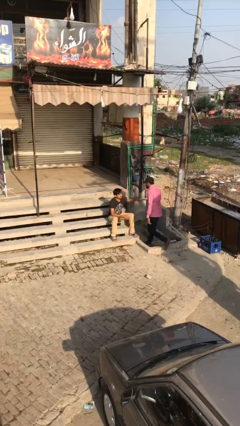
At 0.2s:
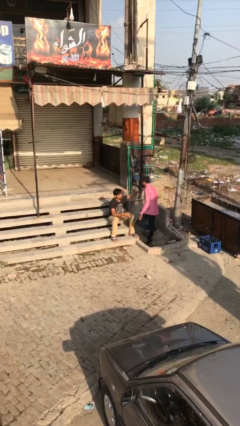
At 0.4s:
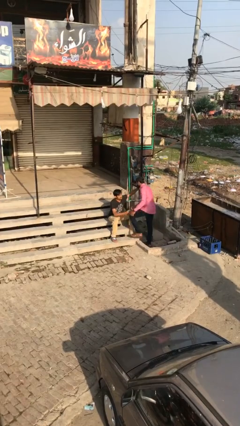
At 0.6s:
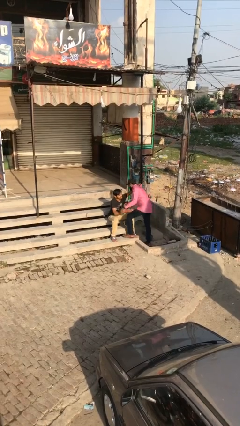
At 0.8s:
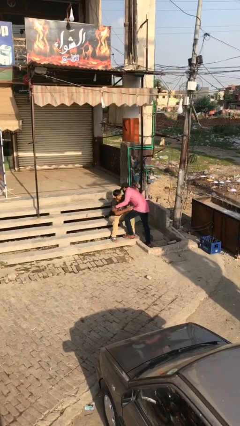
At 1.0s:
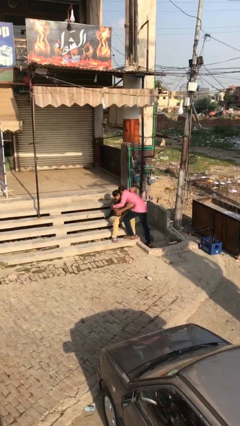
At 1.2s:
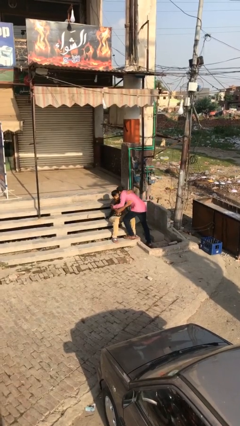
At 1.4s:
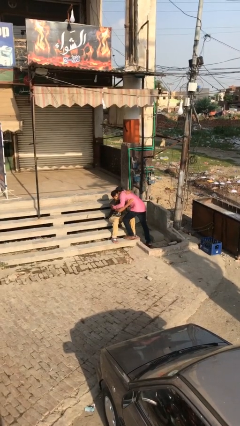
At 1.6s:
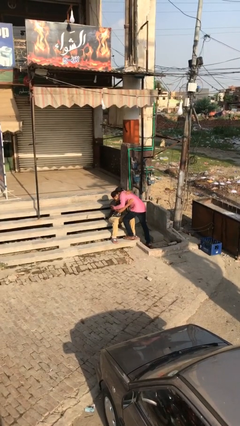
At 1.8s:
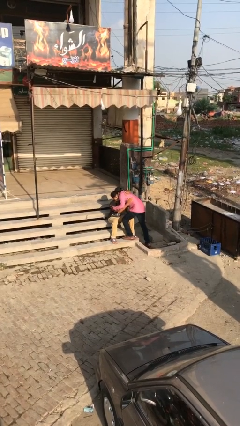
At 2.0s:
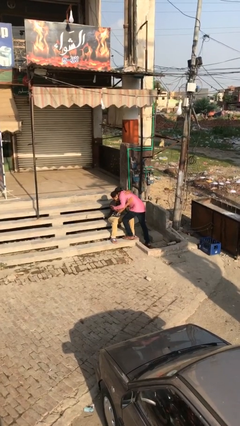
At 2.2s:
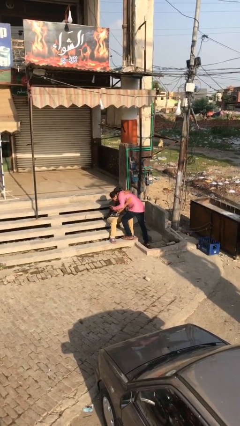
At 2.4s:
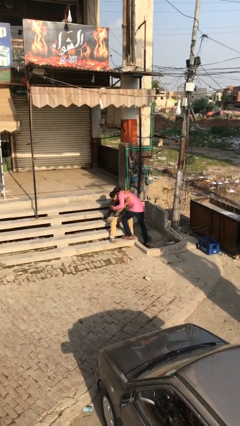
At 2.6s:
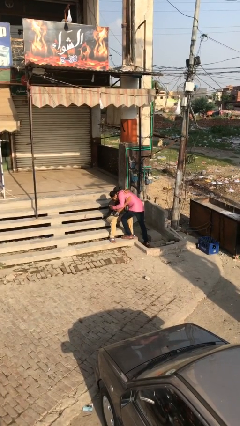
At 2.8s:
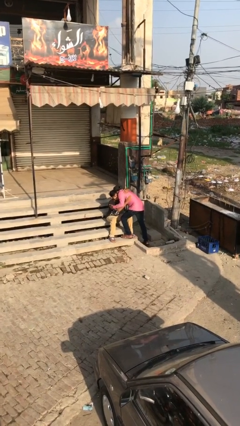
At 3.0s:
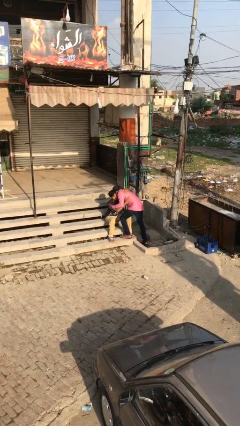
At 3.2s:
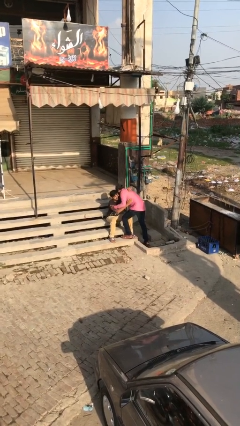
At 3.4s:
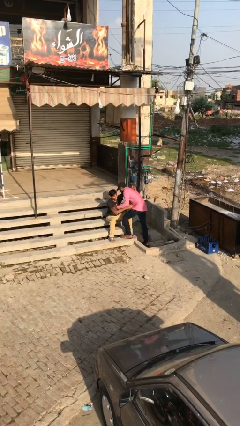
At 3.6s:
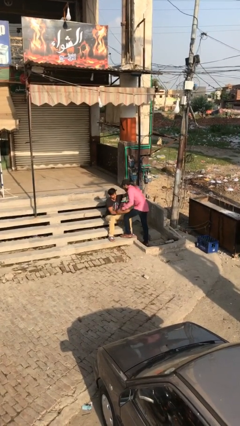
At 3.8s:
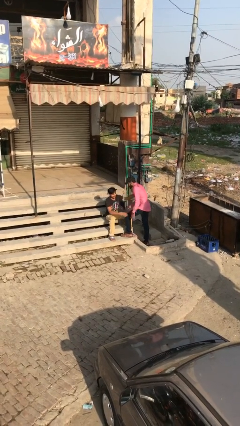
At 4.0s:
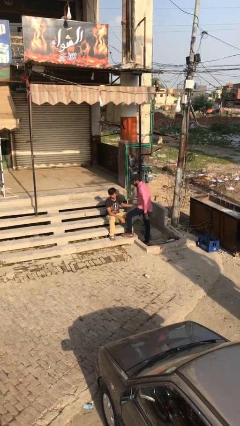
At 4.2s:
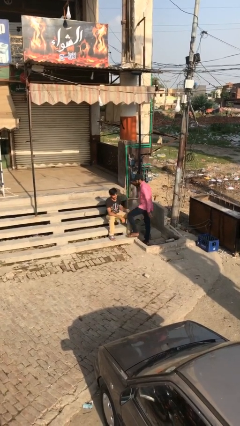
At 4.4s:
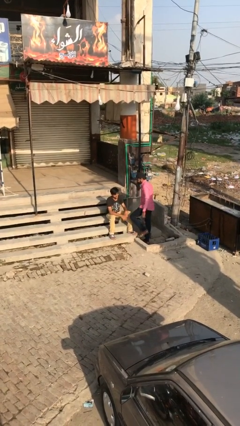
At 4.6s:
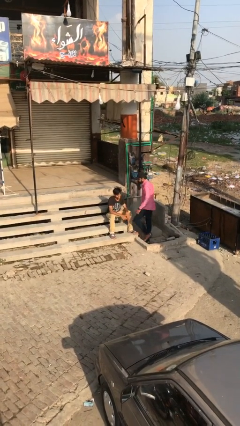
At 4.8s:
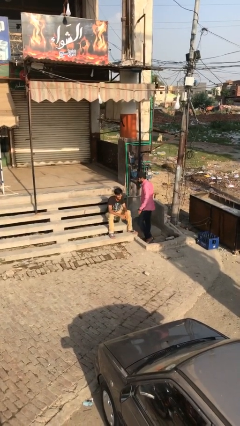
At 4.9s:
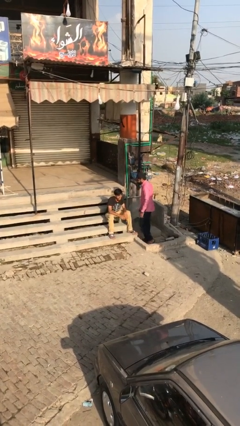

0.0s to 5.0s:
person embraces person

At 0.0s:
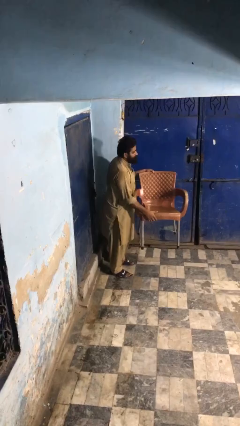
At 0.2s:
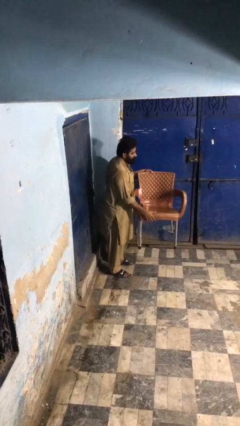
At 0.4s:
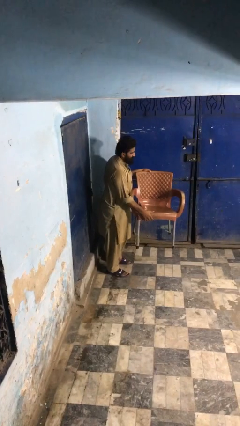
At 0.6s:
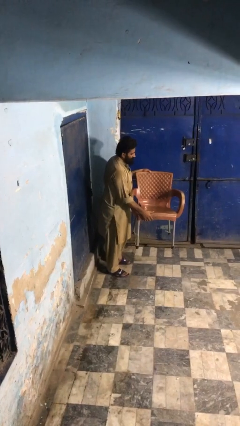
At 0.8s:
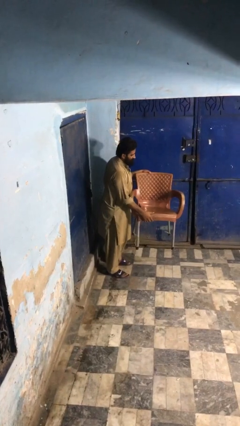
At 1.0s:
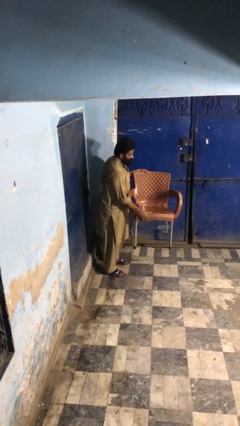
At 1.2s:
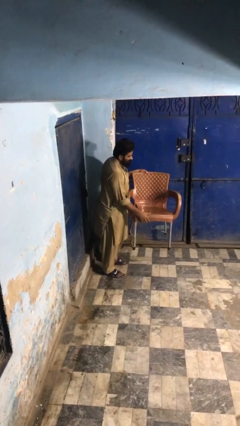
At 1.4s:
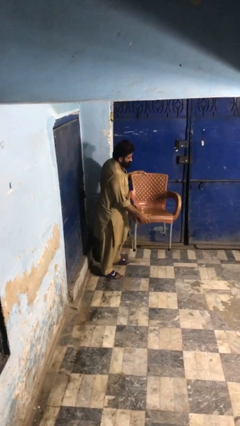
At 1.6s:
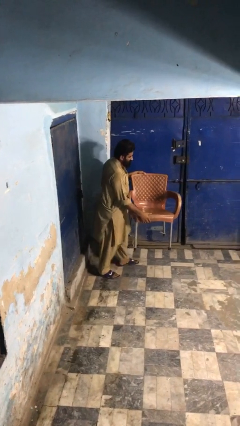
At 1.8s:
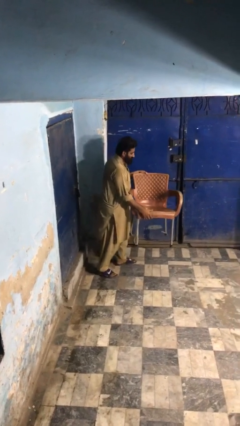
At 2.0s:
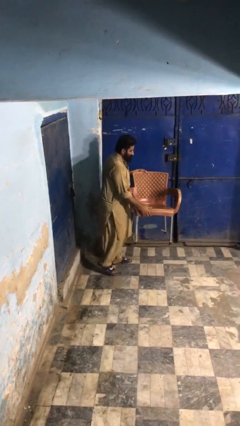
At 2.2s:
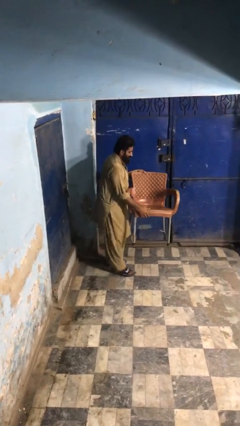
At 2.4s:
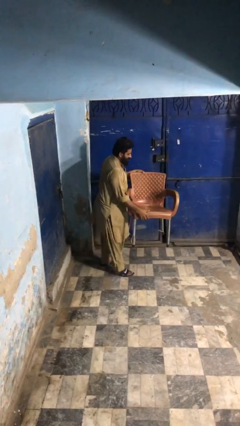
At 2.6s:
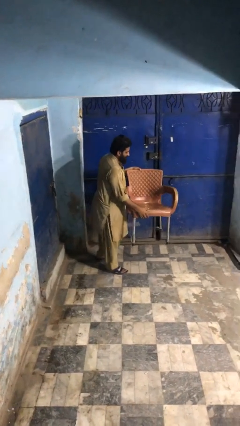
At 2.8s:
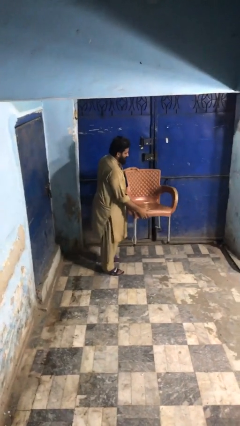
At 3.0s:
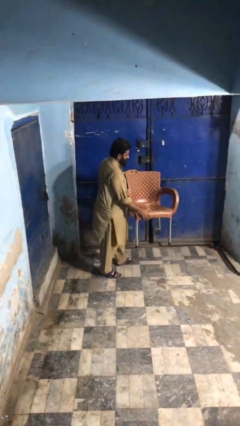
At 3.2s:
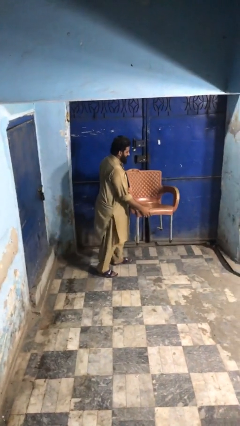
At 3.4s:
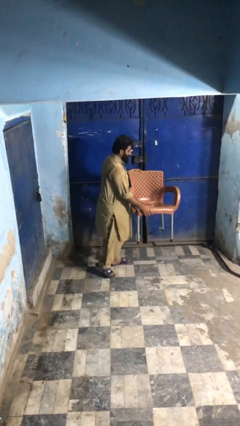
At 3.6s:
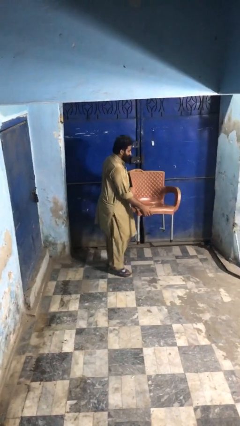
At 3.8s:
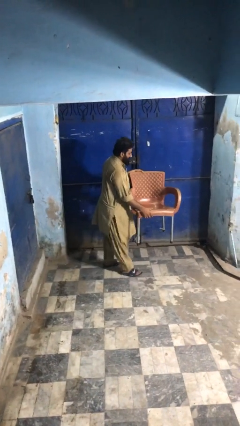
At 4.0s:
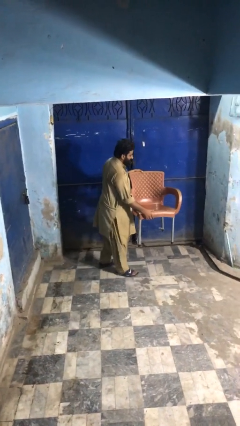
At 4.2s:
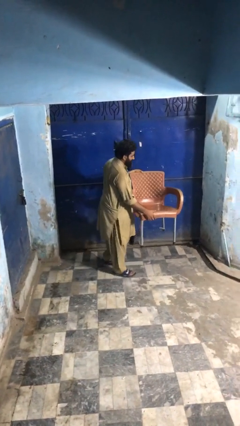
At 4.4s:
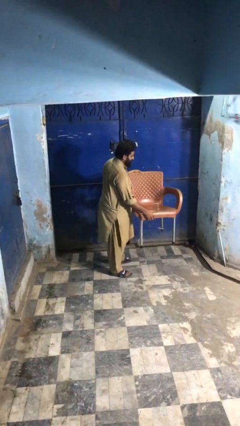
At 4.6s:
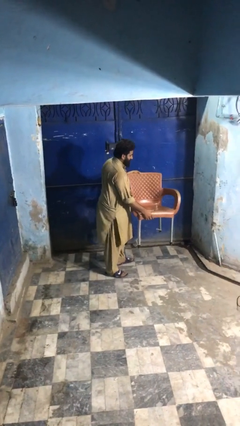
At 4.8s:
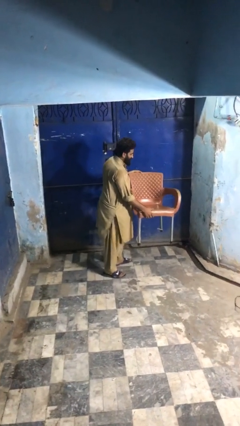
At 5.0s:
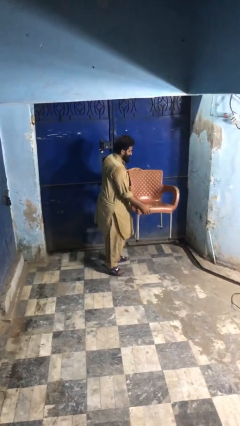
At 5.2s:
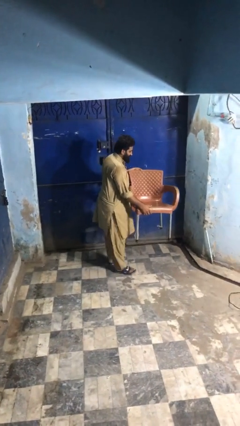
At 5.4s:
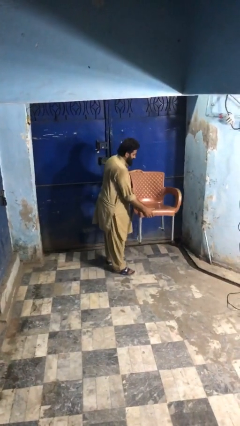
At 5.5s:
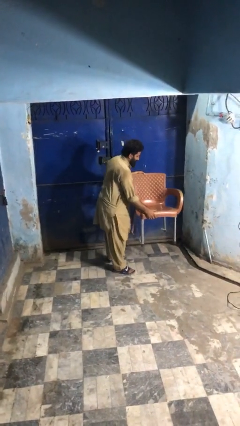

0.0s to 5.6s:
person carries heavy object

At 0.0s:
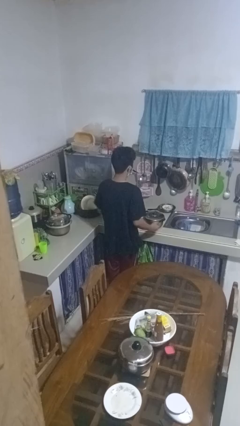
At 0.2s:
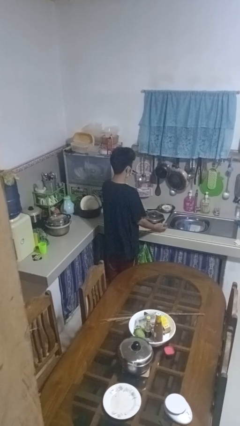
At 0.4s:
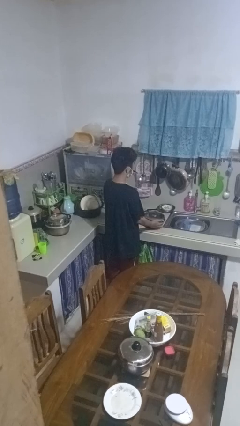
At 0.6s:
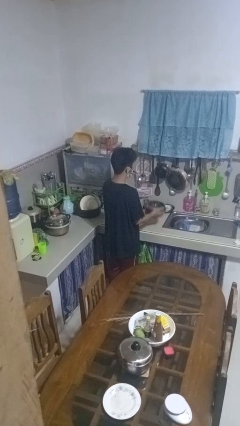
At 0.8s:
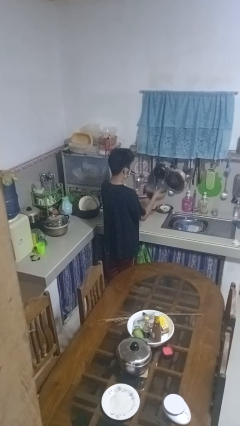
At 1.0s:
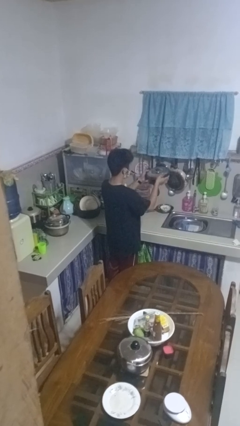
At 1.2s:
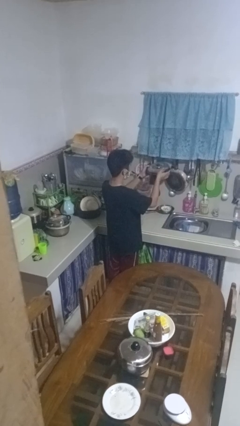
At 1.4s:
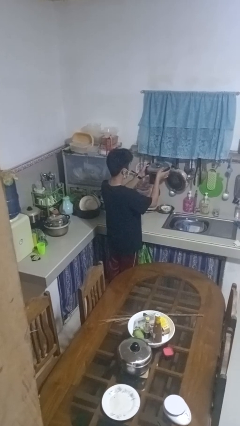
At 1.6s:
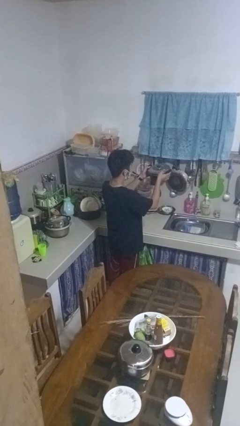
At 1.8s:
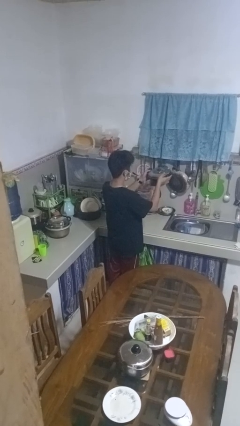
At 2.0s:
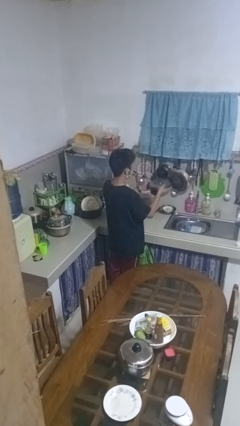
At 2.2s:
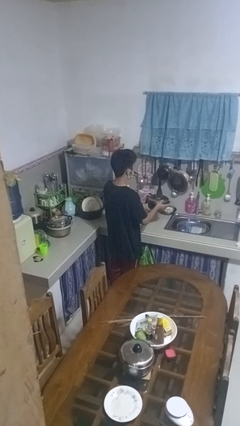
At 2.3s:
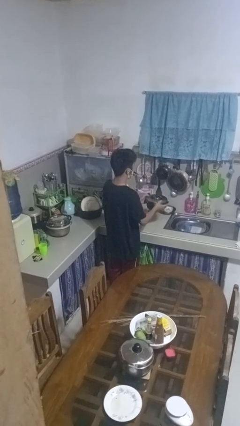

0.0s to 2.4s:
person picks up object from countertop

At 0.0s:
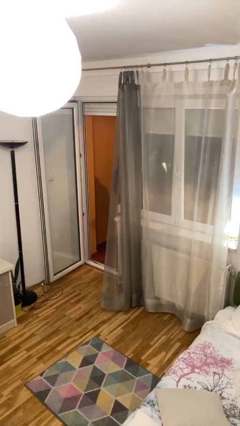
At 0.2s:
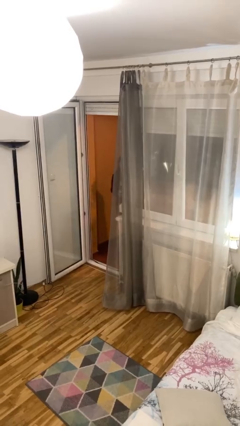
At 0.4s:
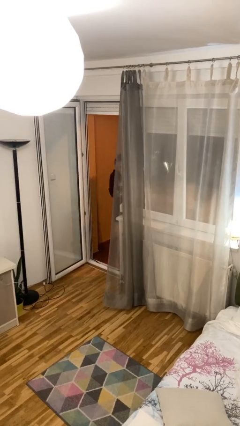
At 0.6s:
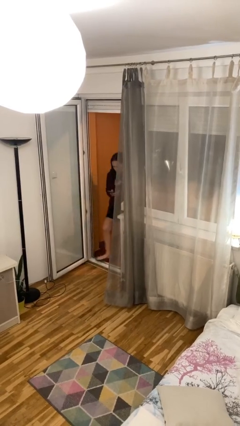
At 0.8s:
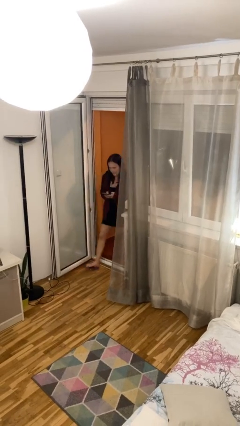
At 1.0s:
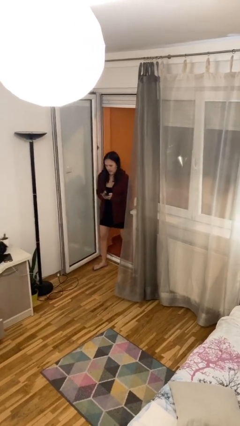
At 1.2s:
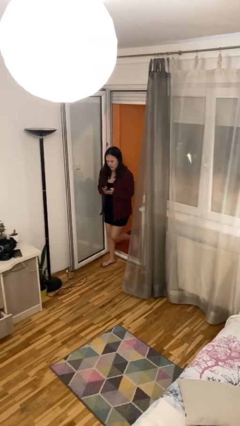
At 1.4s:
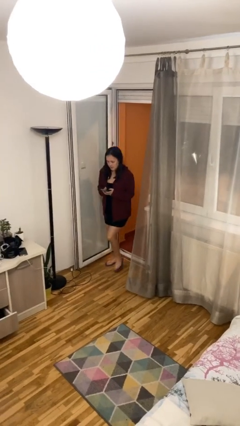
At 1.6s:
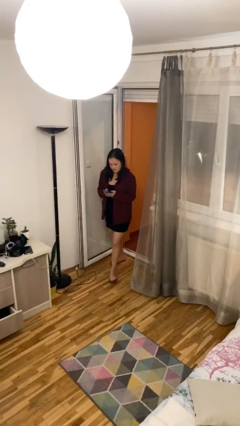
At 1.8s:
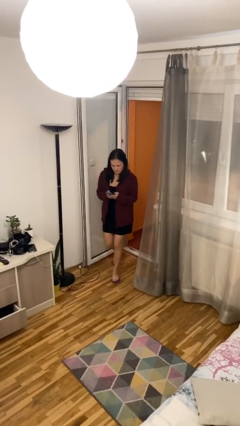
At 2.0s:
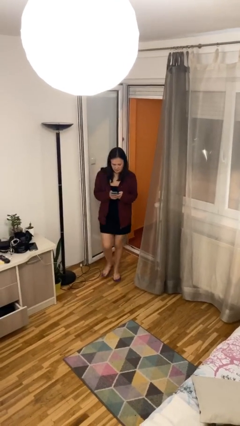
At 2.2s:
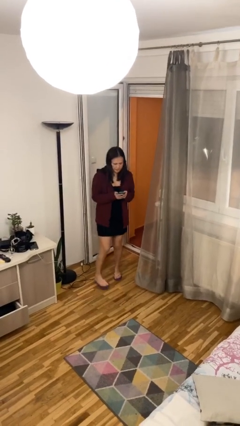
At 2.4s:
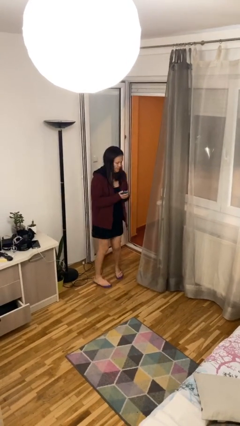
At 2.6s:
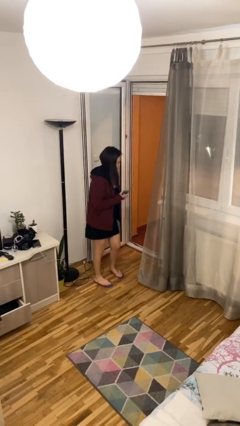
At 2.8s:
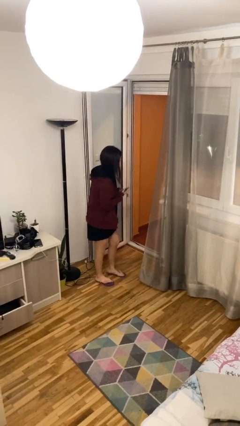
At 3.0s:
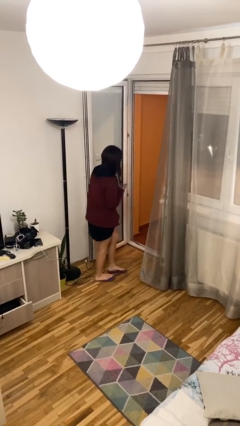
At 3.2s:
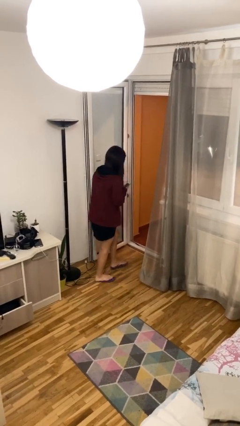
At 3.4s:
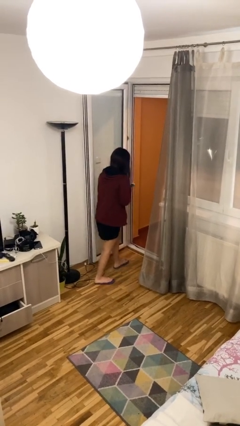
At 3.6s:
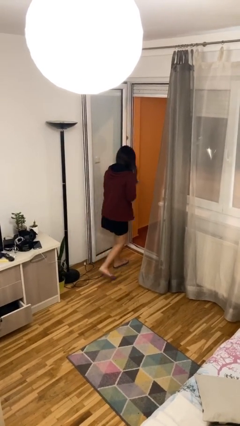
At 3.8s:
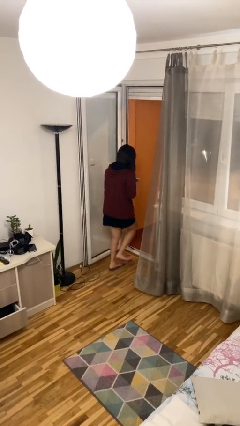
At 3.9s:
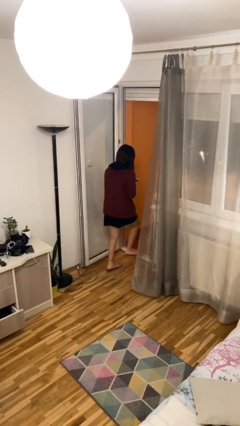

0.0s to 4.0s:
person enters scene through structure

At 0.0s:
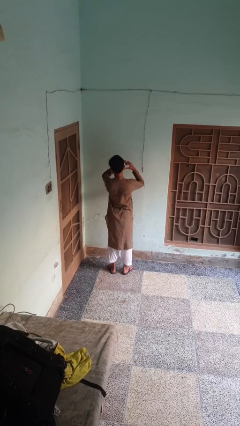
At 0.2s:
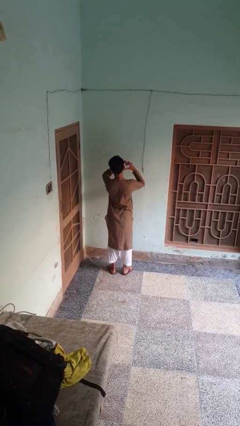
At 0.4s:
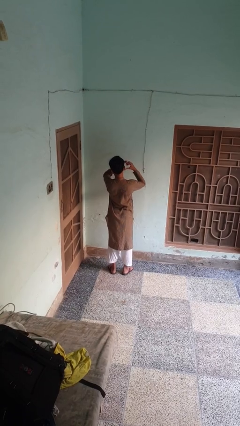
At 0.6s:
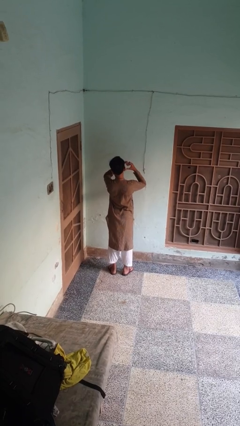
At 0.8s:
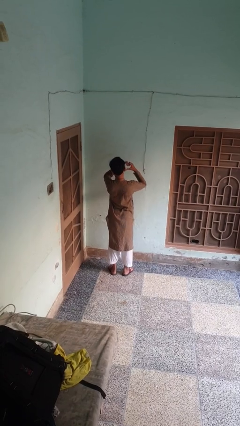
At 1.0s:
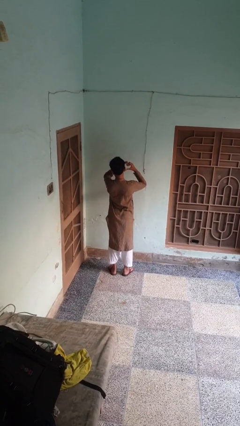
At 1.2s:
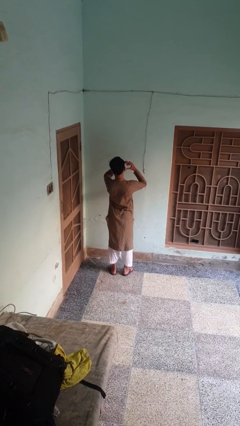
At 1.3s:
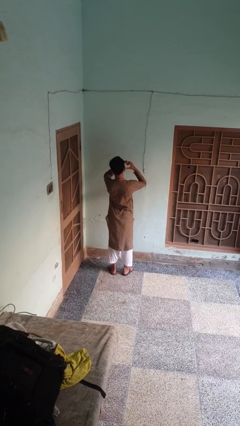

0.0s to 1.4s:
person gestures heart
